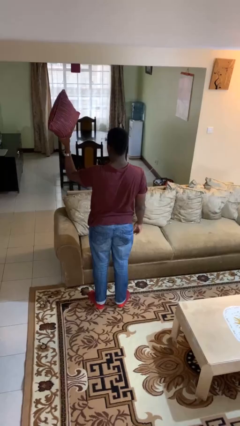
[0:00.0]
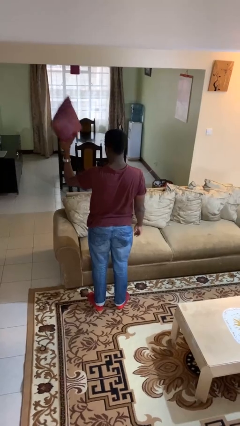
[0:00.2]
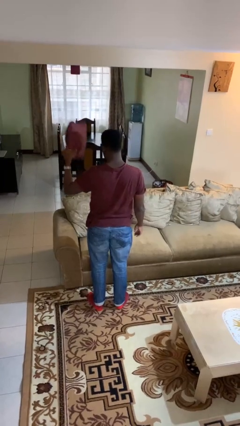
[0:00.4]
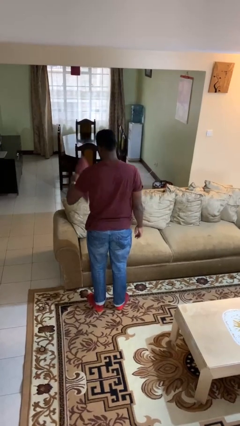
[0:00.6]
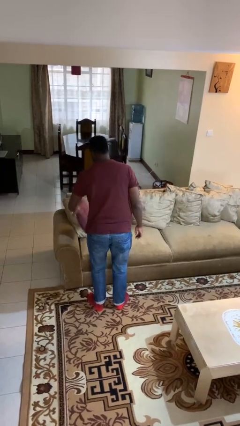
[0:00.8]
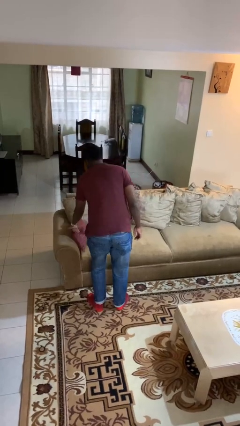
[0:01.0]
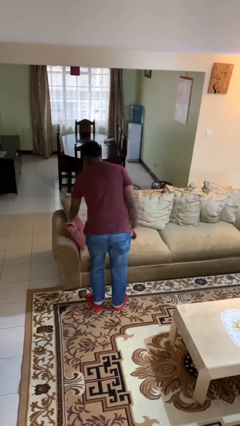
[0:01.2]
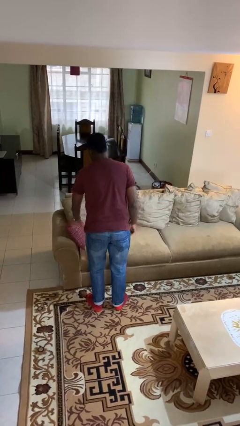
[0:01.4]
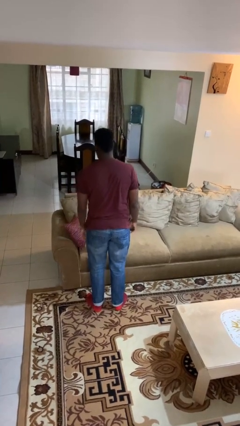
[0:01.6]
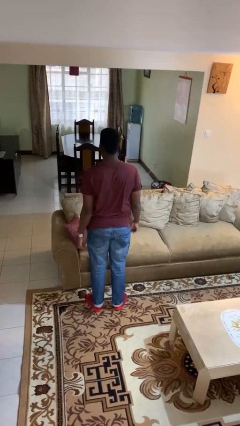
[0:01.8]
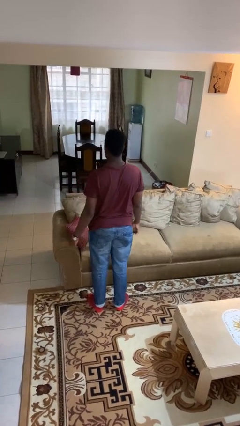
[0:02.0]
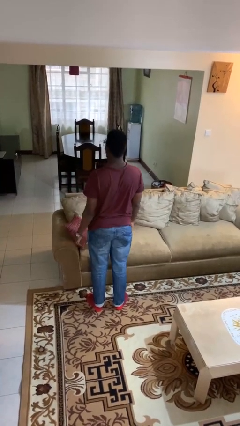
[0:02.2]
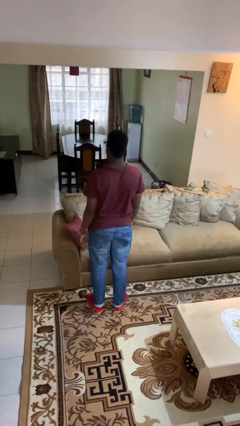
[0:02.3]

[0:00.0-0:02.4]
person puts down object on couch

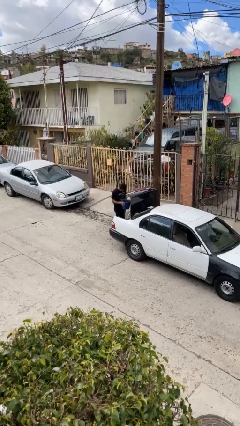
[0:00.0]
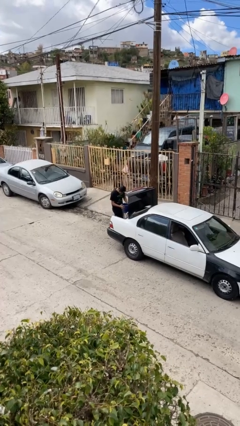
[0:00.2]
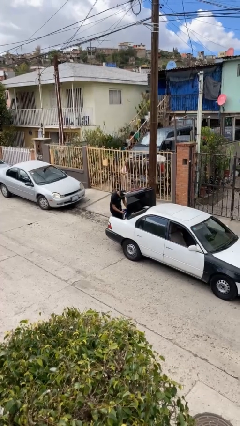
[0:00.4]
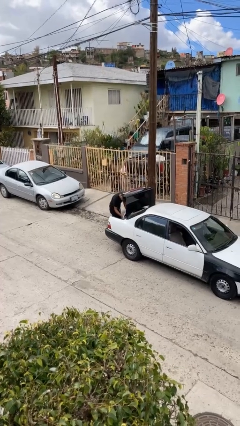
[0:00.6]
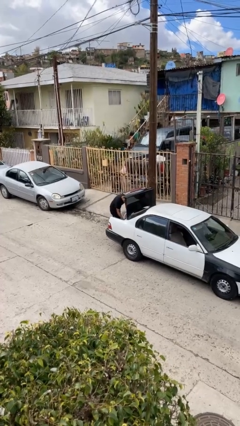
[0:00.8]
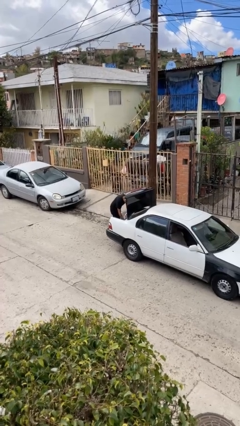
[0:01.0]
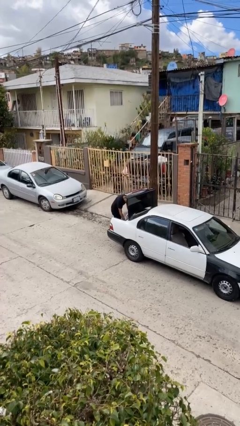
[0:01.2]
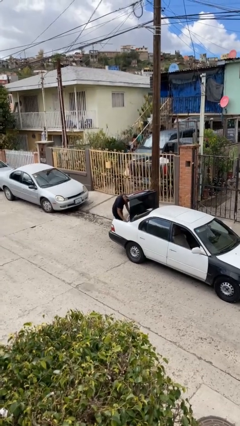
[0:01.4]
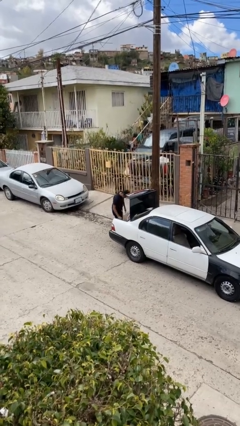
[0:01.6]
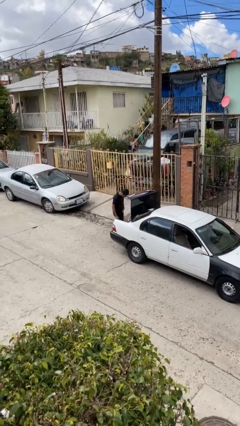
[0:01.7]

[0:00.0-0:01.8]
person loads car

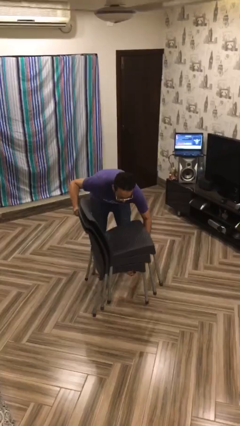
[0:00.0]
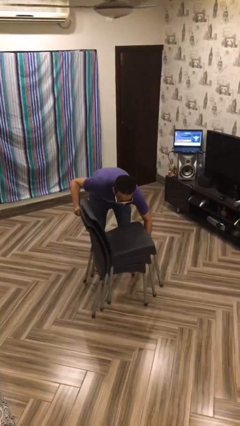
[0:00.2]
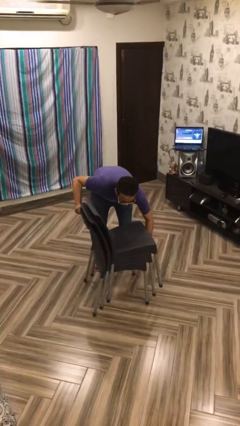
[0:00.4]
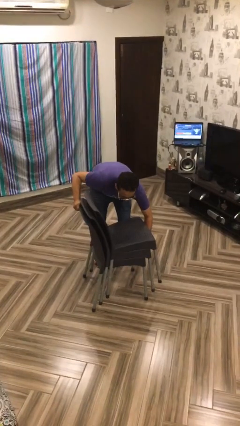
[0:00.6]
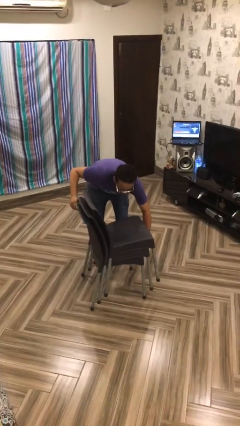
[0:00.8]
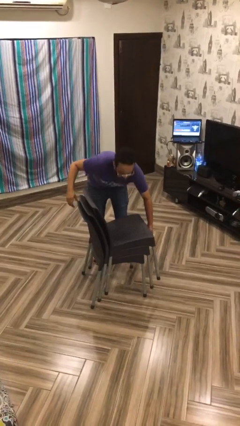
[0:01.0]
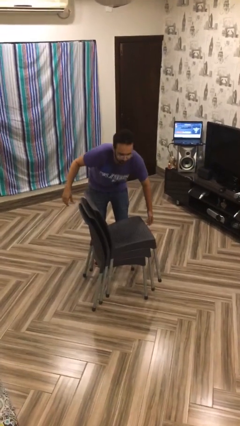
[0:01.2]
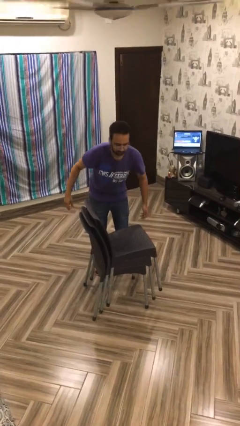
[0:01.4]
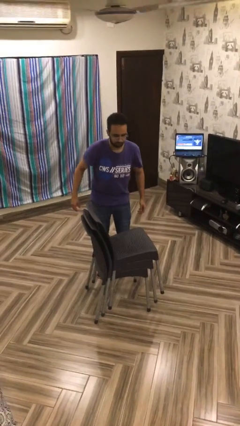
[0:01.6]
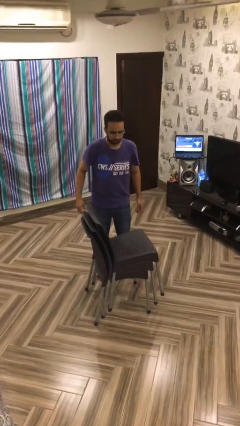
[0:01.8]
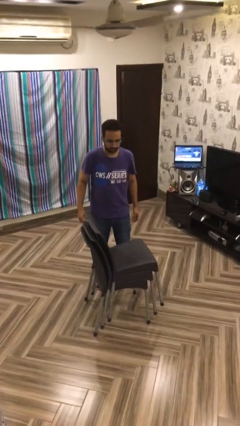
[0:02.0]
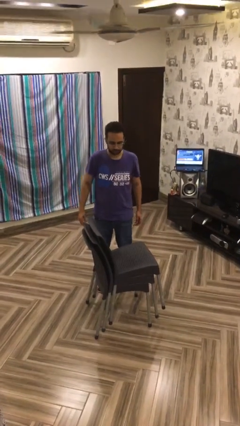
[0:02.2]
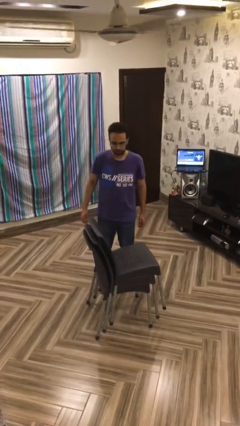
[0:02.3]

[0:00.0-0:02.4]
person puts down object on floor

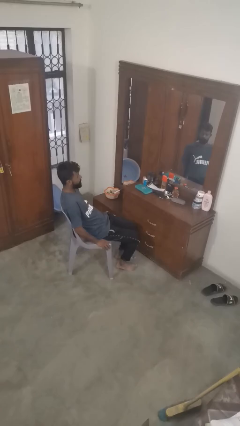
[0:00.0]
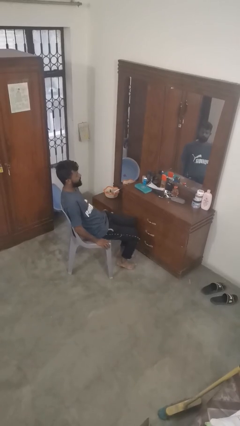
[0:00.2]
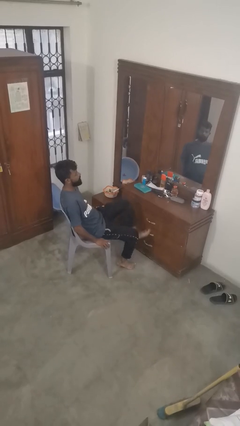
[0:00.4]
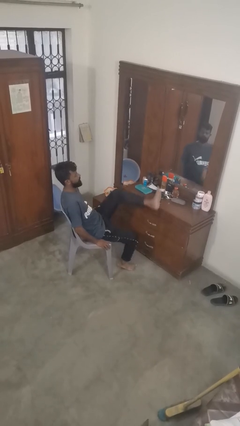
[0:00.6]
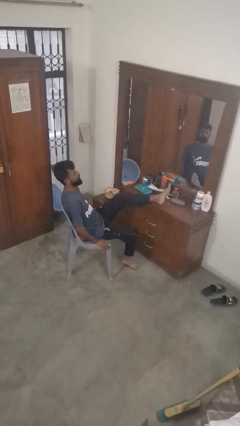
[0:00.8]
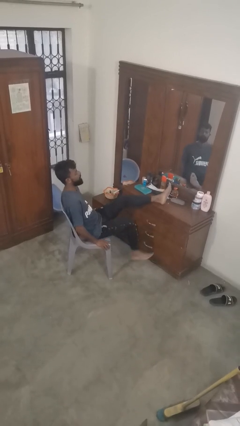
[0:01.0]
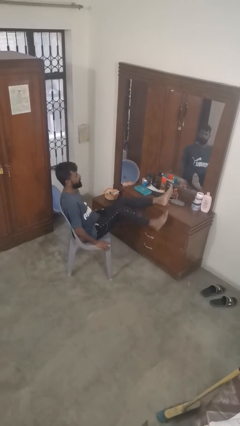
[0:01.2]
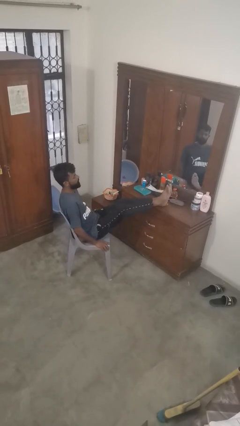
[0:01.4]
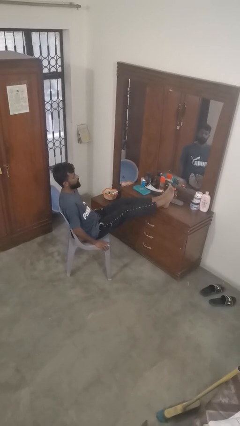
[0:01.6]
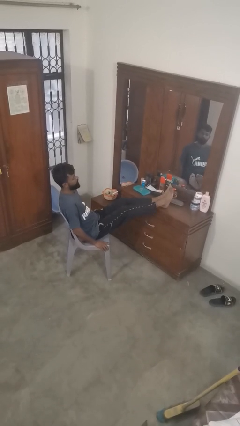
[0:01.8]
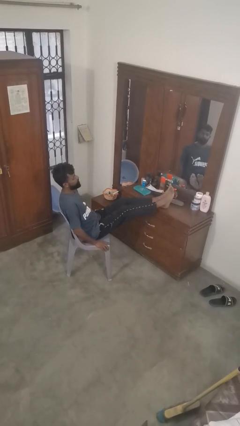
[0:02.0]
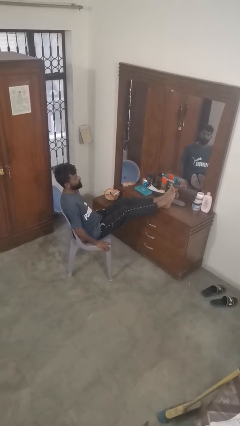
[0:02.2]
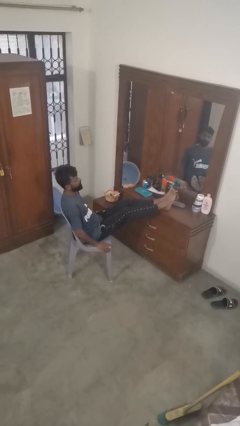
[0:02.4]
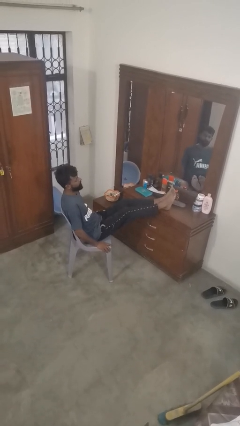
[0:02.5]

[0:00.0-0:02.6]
person puts feet up

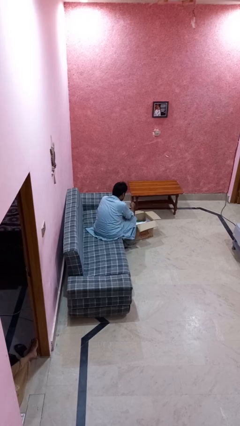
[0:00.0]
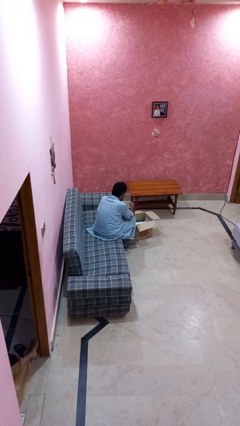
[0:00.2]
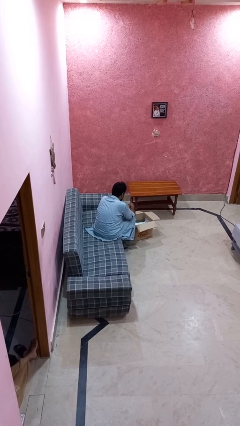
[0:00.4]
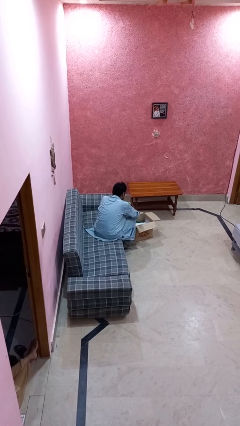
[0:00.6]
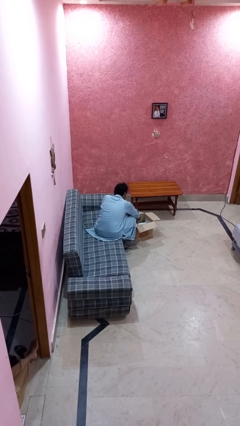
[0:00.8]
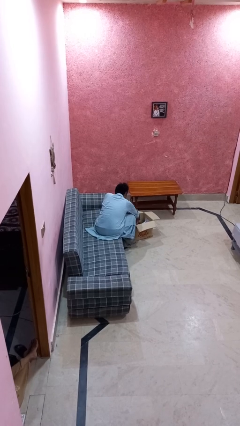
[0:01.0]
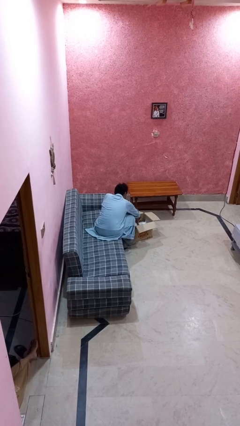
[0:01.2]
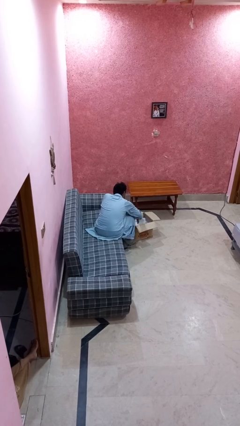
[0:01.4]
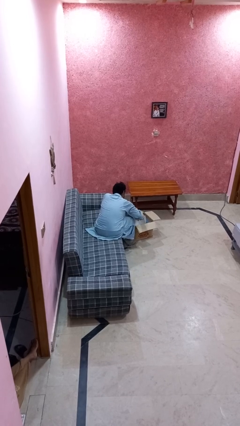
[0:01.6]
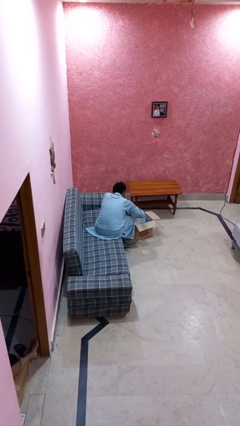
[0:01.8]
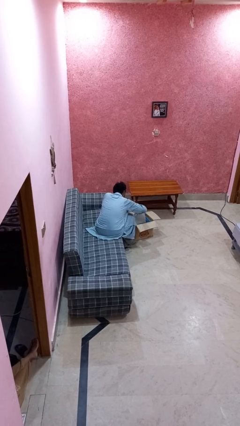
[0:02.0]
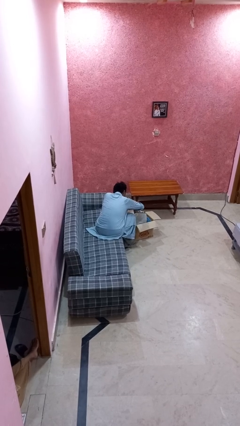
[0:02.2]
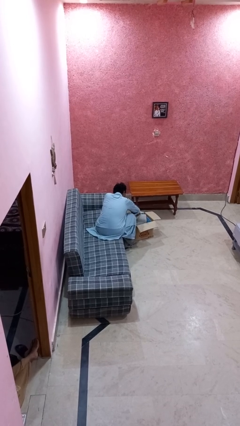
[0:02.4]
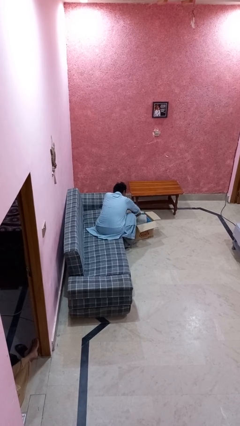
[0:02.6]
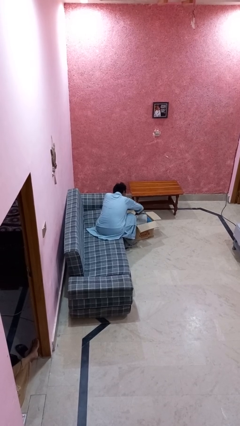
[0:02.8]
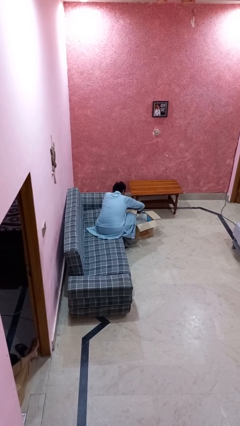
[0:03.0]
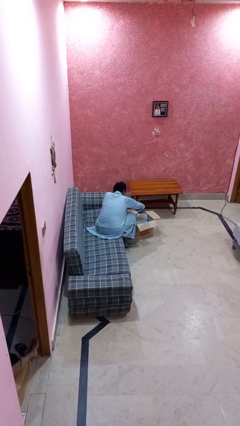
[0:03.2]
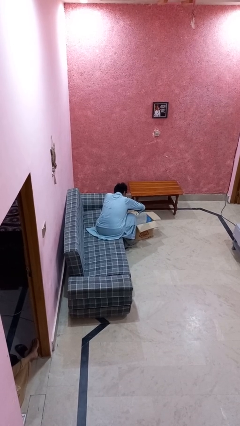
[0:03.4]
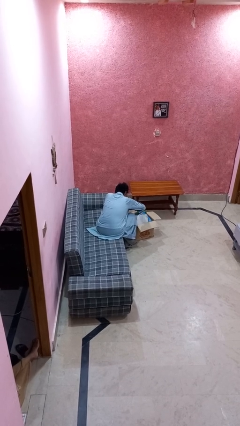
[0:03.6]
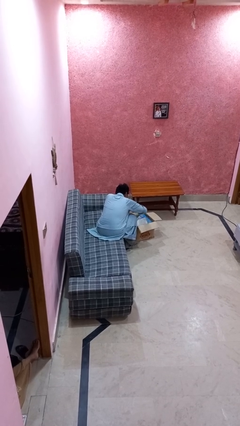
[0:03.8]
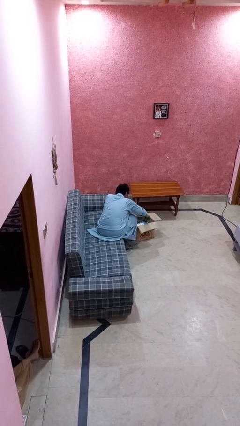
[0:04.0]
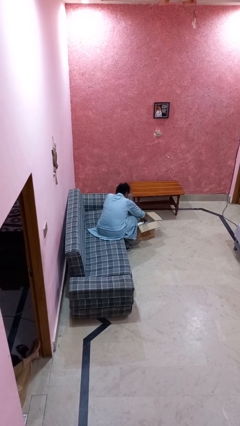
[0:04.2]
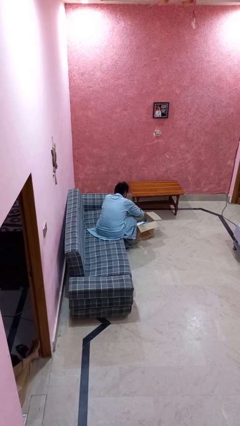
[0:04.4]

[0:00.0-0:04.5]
person searches in box

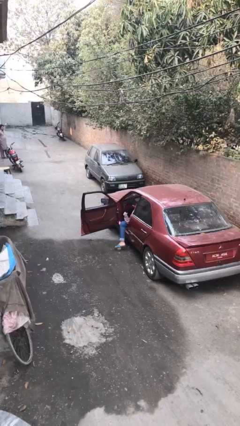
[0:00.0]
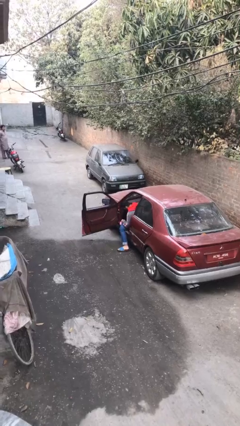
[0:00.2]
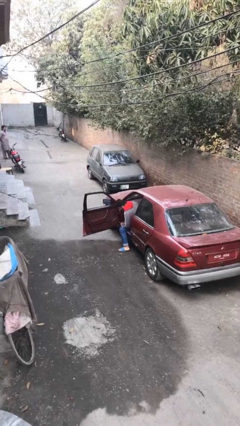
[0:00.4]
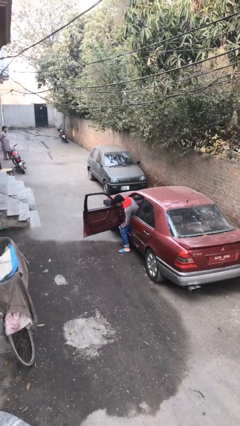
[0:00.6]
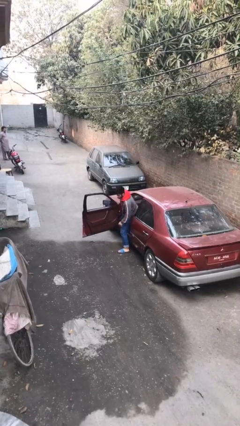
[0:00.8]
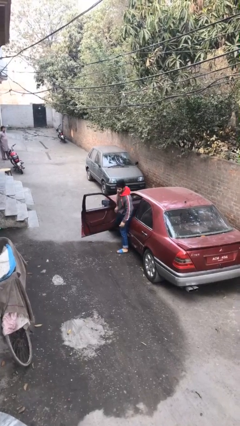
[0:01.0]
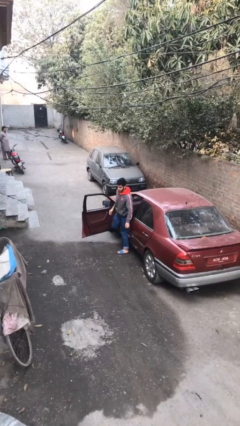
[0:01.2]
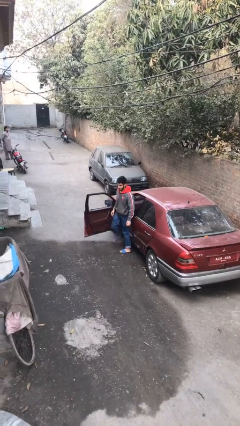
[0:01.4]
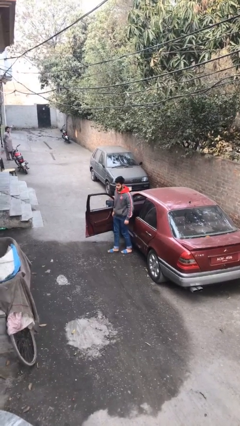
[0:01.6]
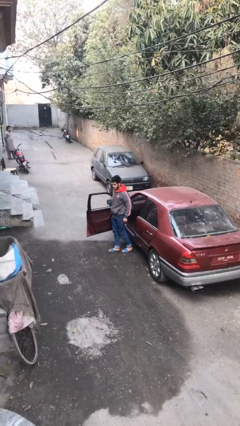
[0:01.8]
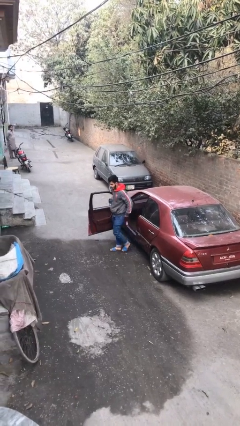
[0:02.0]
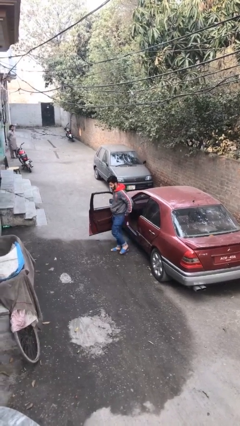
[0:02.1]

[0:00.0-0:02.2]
person exits car

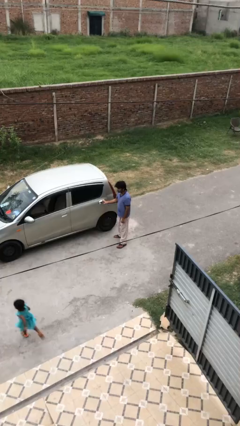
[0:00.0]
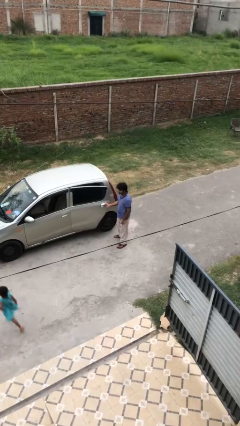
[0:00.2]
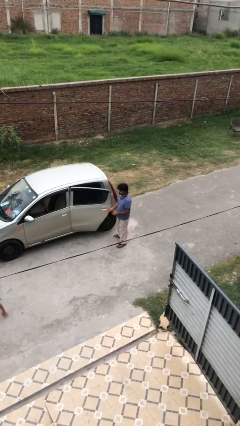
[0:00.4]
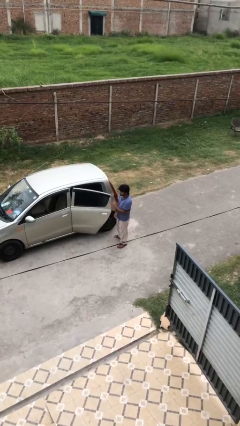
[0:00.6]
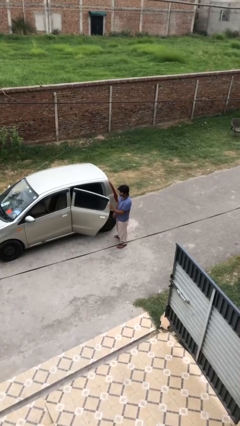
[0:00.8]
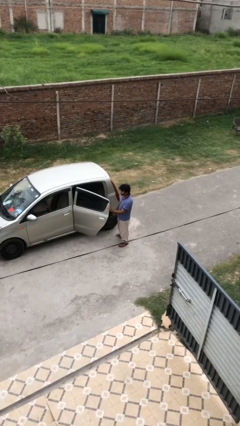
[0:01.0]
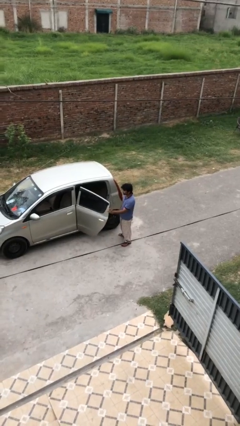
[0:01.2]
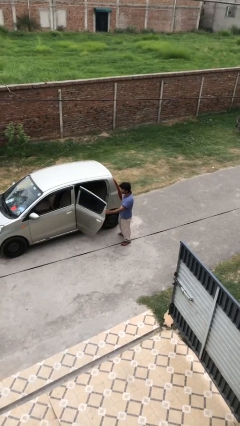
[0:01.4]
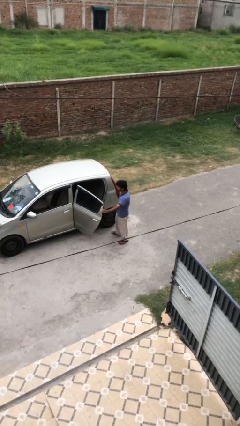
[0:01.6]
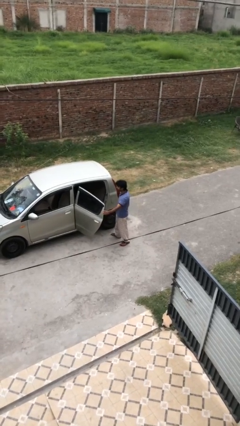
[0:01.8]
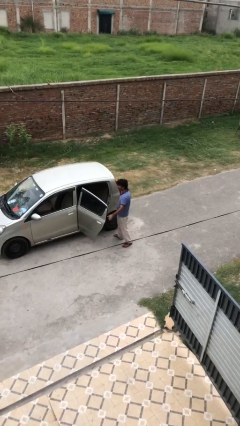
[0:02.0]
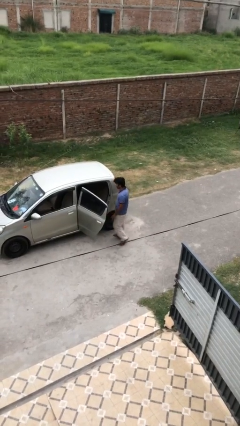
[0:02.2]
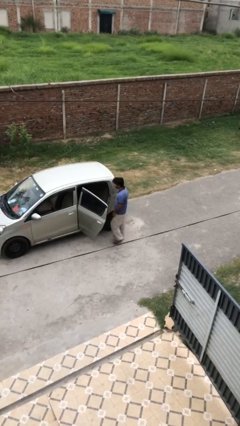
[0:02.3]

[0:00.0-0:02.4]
person opens car door
